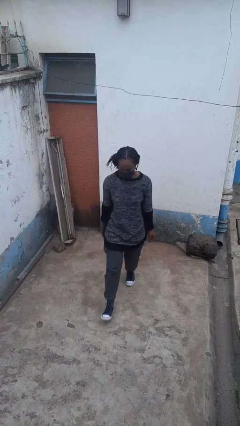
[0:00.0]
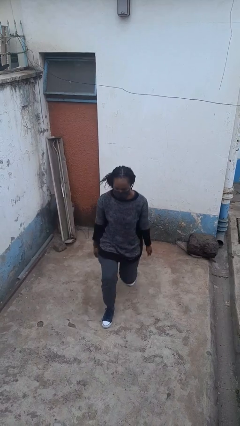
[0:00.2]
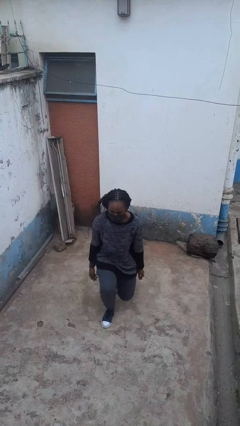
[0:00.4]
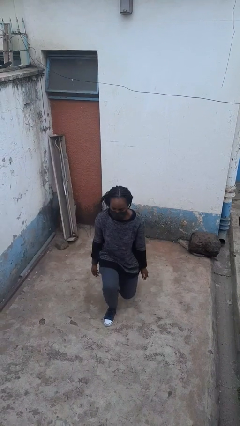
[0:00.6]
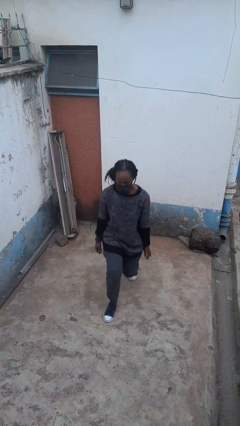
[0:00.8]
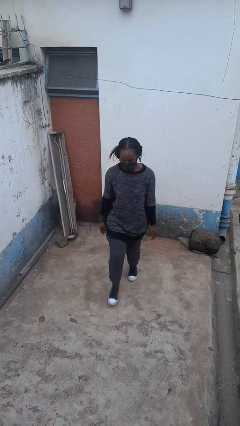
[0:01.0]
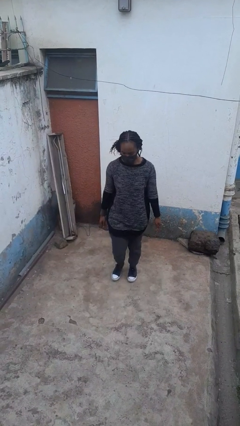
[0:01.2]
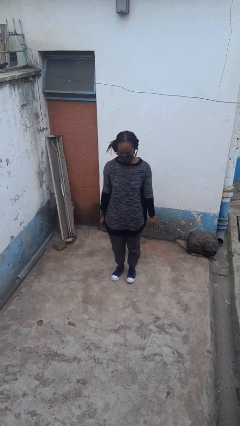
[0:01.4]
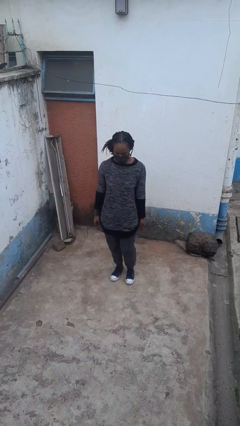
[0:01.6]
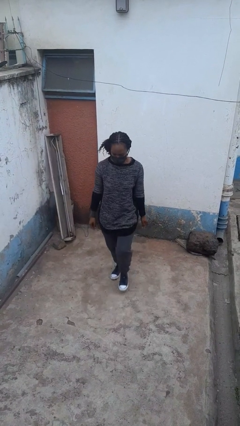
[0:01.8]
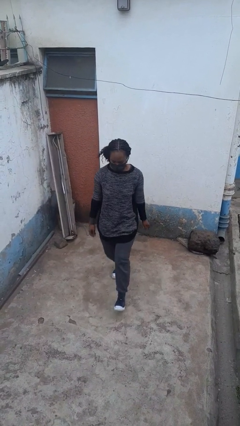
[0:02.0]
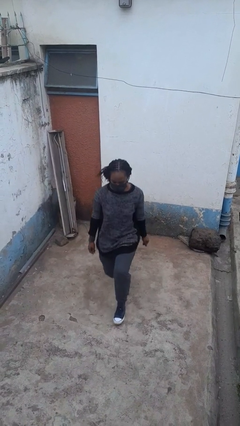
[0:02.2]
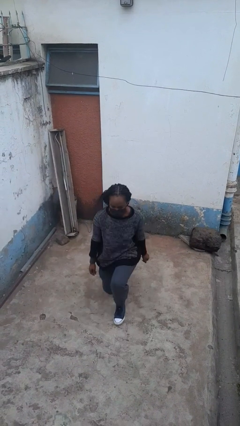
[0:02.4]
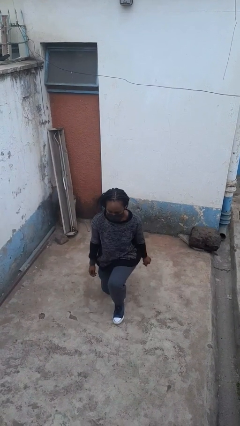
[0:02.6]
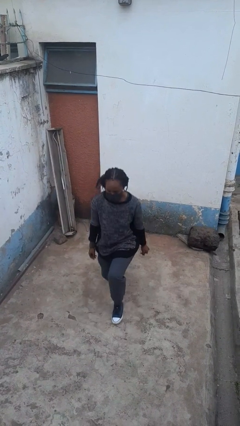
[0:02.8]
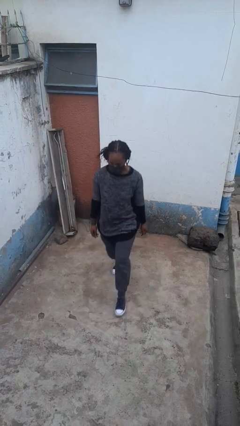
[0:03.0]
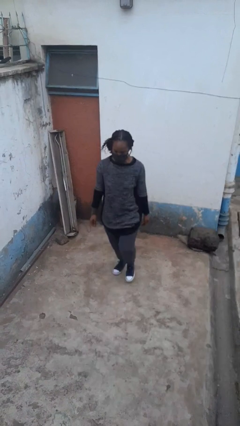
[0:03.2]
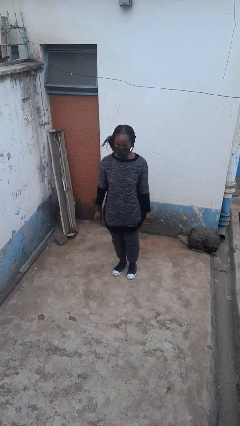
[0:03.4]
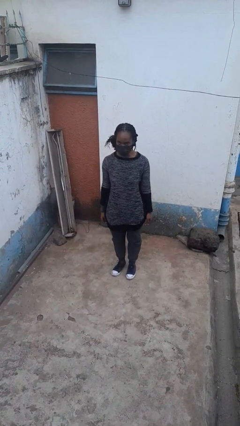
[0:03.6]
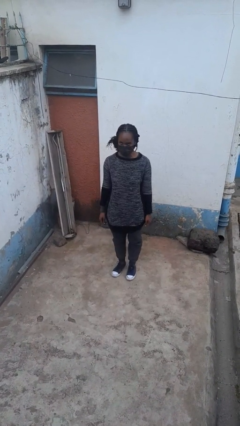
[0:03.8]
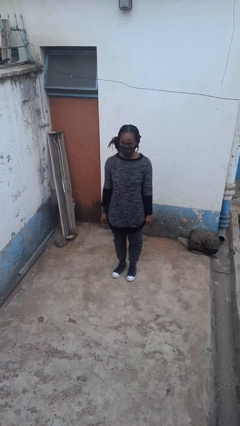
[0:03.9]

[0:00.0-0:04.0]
person exercises with lunges

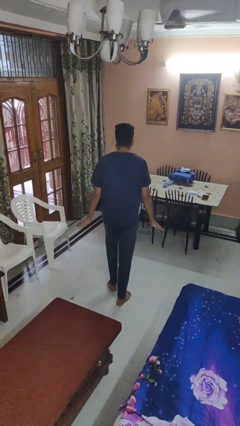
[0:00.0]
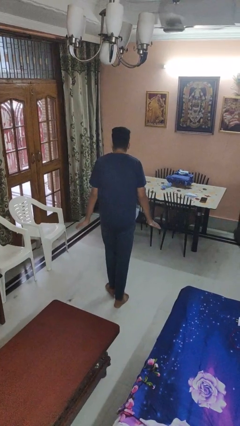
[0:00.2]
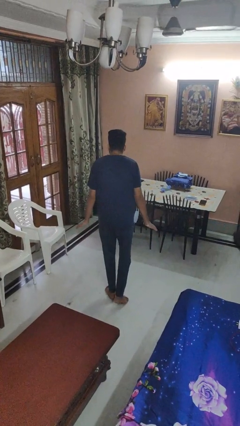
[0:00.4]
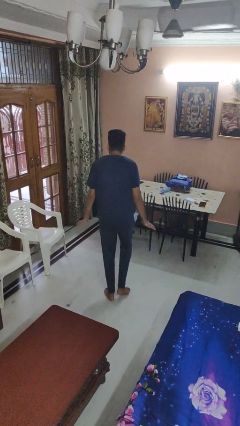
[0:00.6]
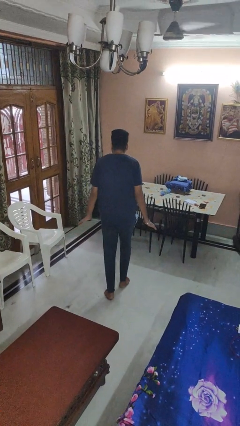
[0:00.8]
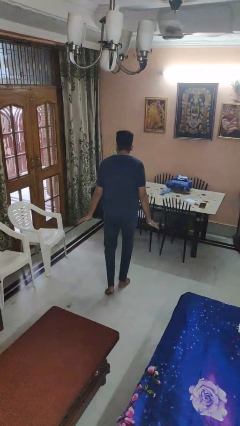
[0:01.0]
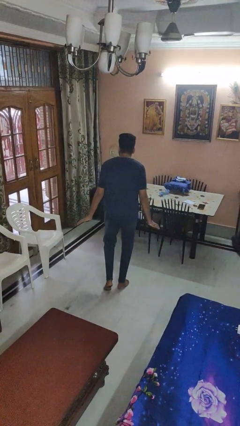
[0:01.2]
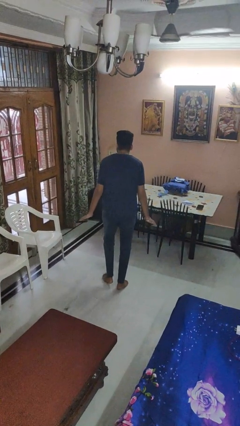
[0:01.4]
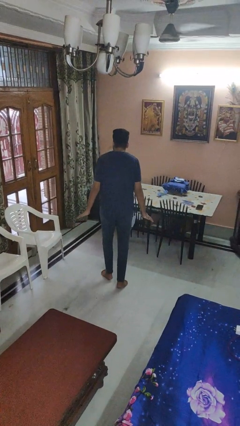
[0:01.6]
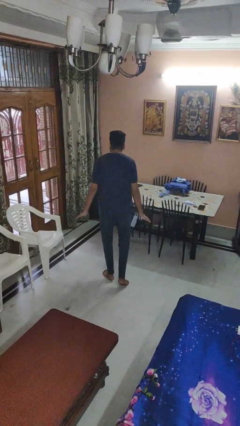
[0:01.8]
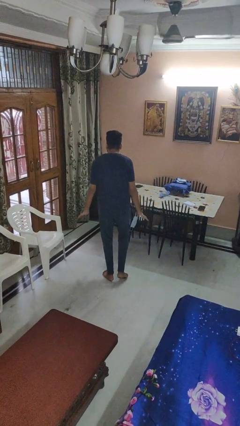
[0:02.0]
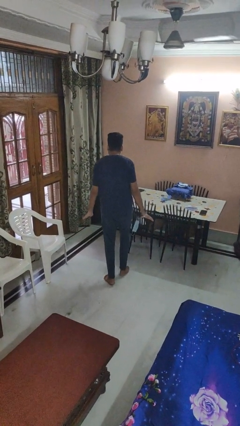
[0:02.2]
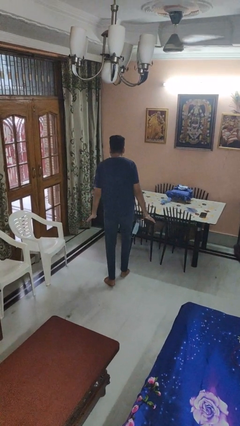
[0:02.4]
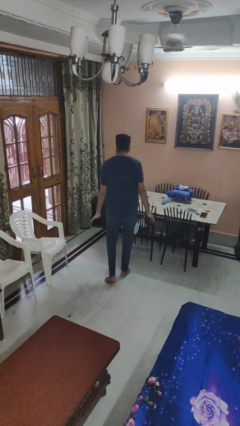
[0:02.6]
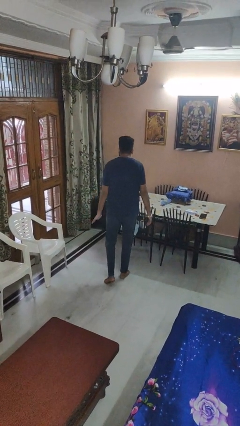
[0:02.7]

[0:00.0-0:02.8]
person walks tiptoe

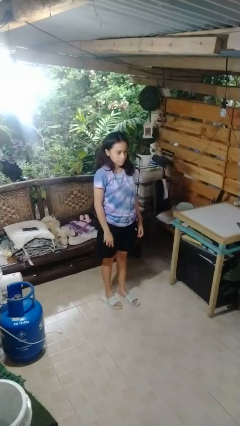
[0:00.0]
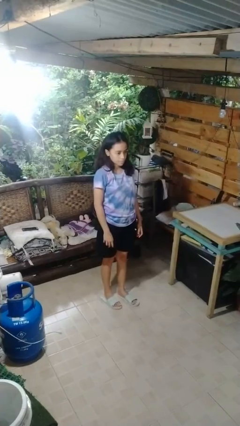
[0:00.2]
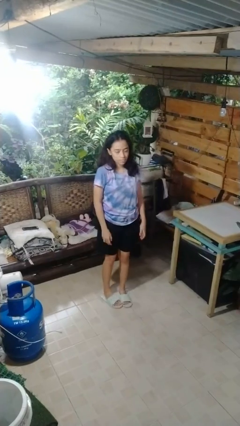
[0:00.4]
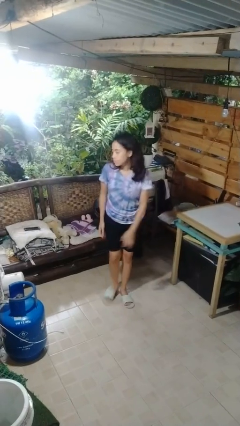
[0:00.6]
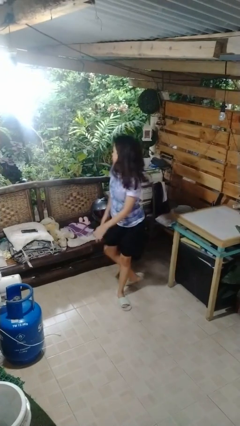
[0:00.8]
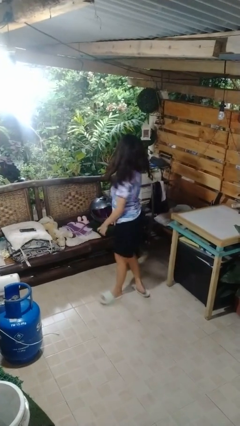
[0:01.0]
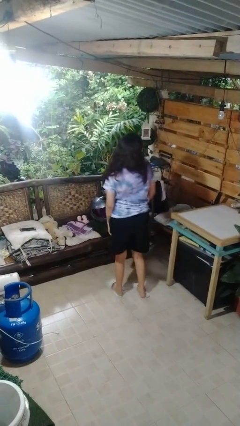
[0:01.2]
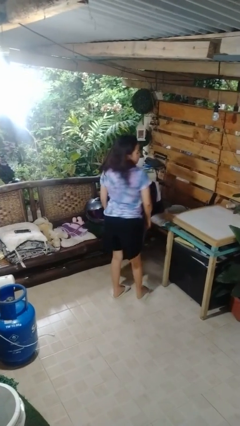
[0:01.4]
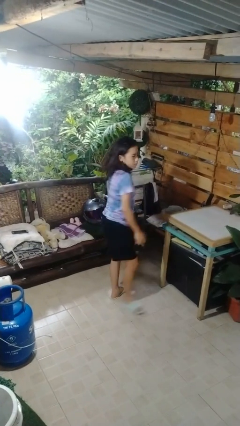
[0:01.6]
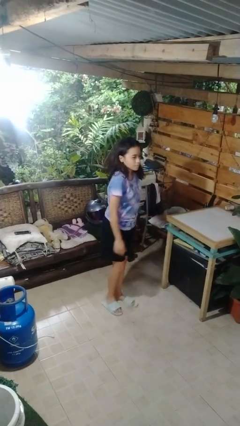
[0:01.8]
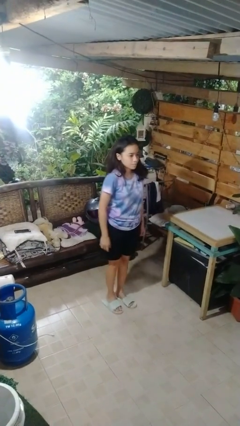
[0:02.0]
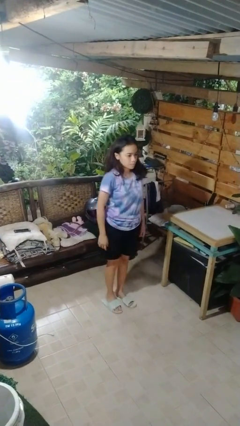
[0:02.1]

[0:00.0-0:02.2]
person twirls

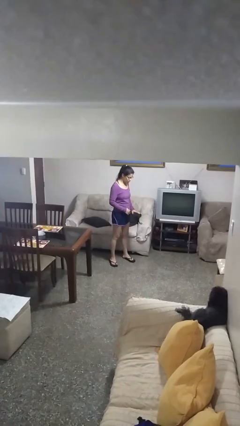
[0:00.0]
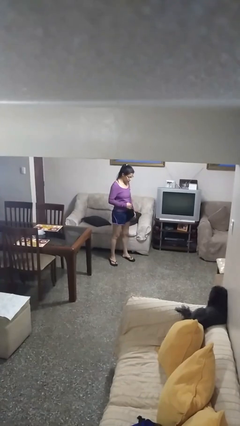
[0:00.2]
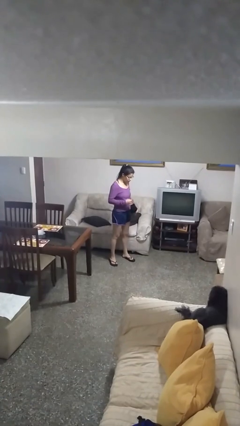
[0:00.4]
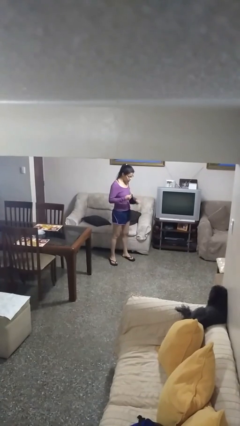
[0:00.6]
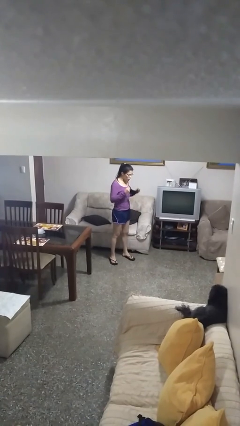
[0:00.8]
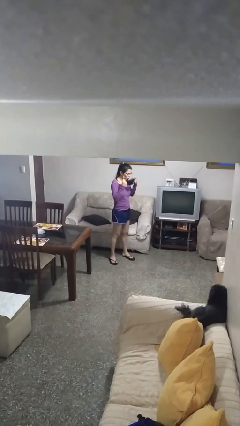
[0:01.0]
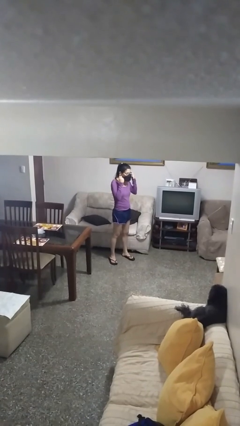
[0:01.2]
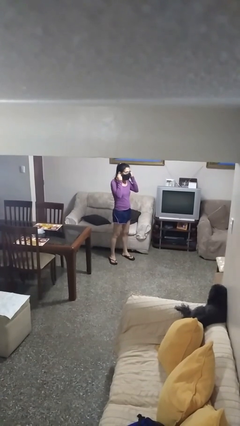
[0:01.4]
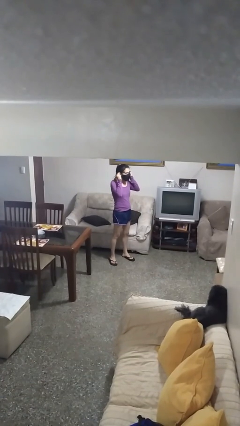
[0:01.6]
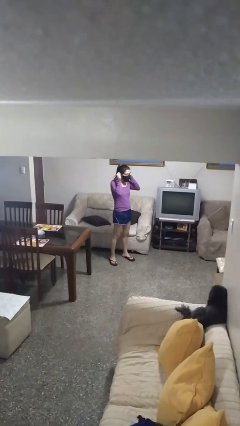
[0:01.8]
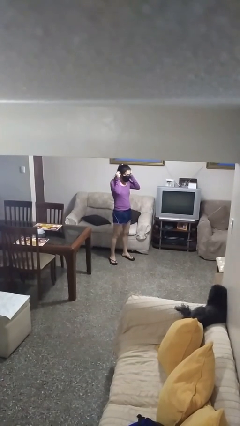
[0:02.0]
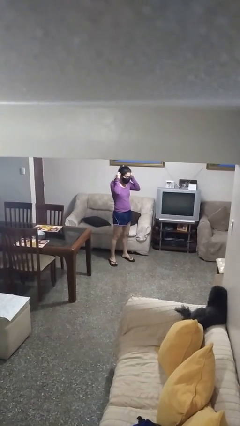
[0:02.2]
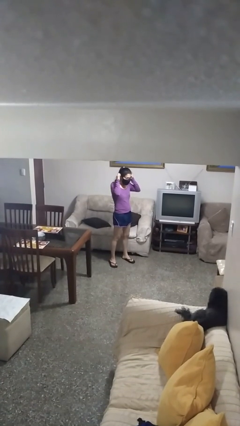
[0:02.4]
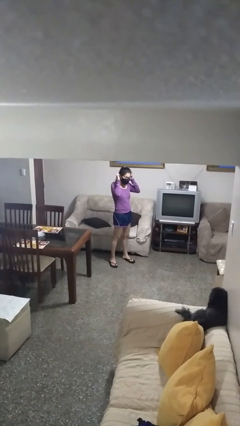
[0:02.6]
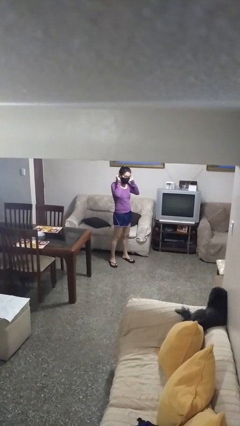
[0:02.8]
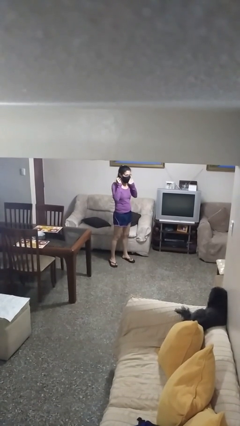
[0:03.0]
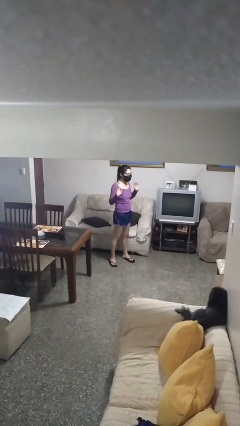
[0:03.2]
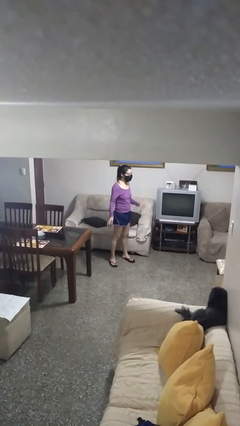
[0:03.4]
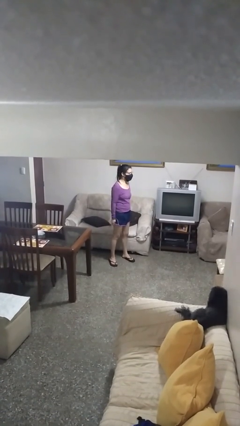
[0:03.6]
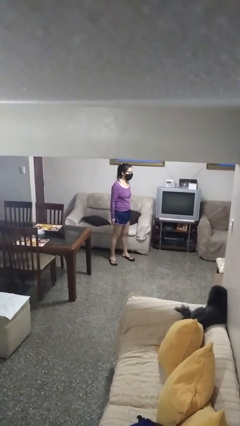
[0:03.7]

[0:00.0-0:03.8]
person puts on facemask

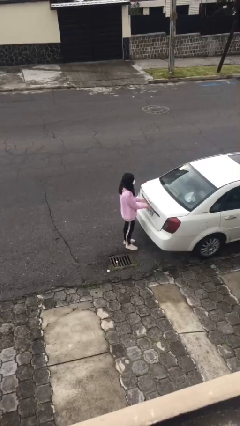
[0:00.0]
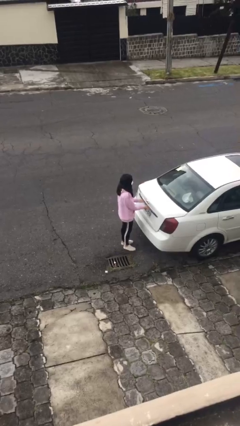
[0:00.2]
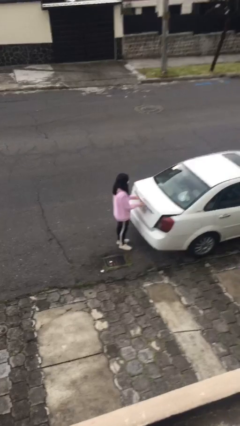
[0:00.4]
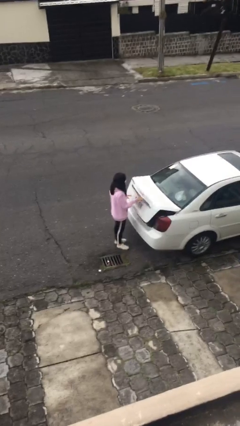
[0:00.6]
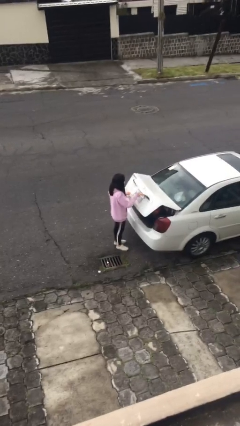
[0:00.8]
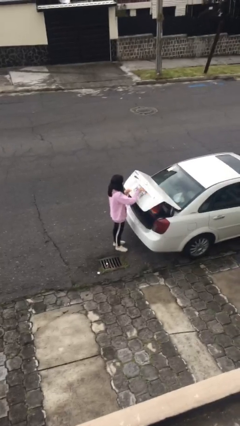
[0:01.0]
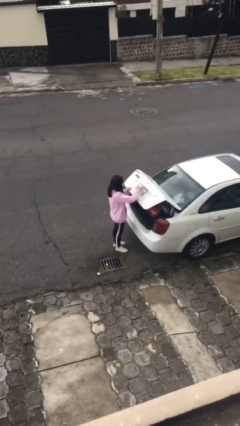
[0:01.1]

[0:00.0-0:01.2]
person opens car trunk

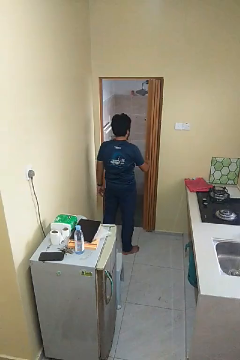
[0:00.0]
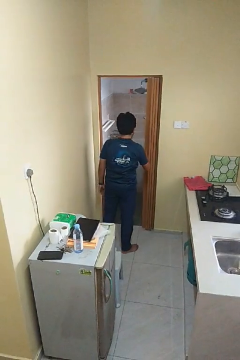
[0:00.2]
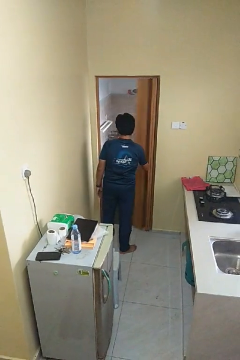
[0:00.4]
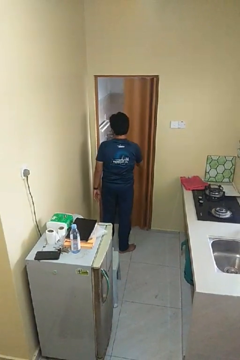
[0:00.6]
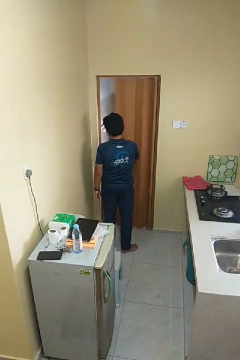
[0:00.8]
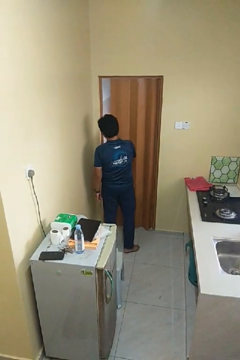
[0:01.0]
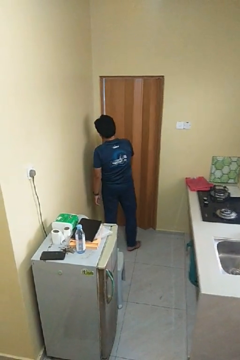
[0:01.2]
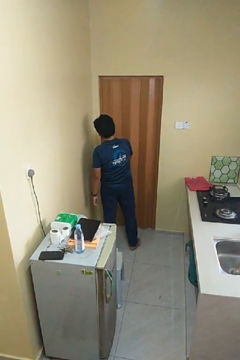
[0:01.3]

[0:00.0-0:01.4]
person closes sliding door

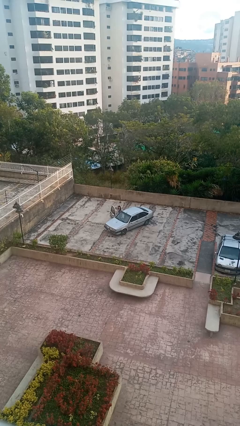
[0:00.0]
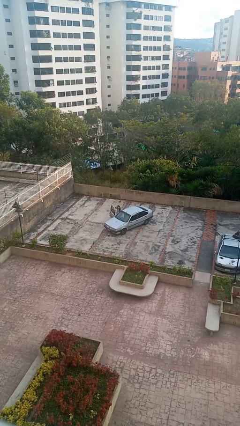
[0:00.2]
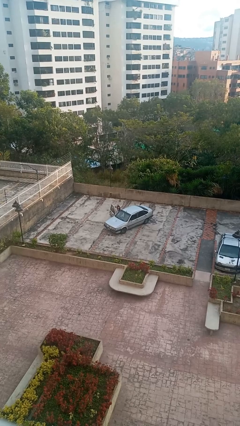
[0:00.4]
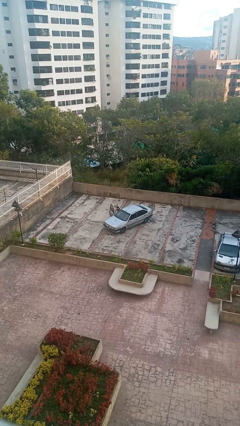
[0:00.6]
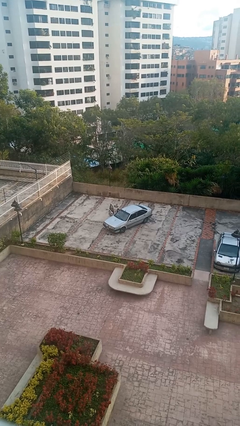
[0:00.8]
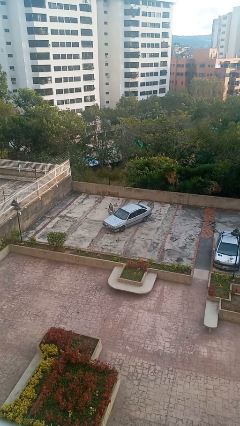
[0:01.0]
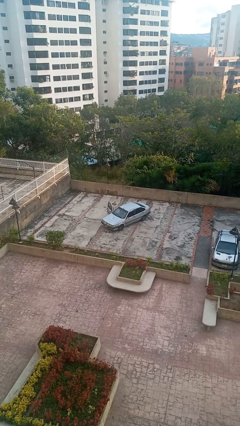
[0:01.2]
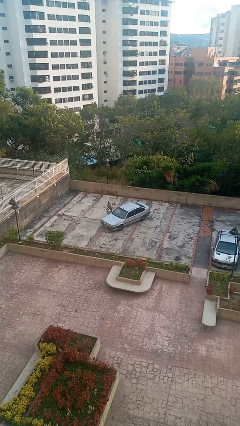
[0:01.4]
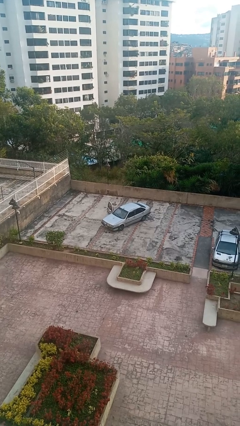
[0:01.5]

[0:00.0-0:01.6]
person enters car

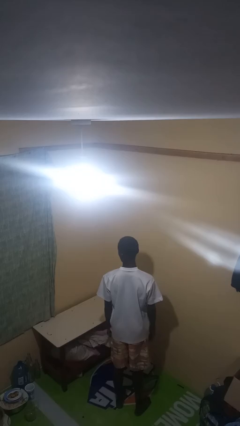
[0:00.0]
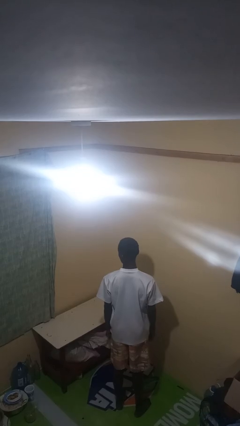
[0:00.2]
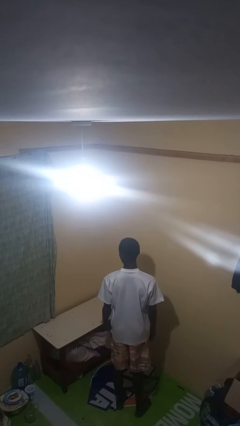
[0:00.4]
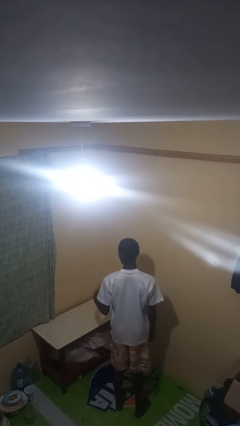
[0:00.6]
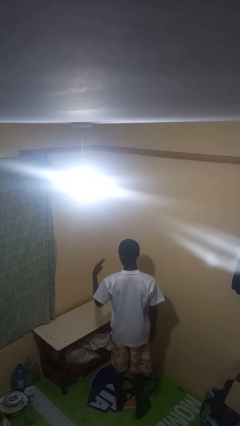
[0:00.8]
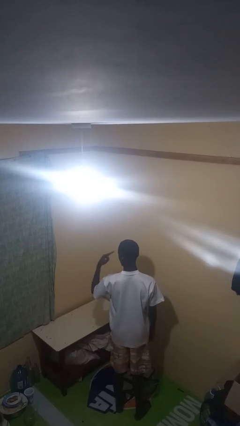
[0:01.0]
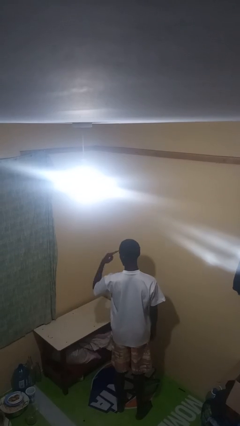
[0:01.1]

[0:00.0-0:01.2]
person gestures watch closely
